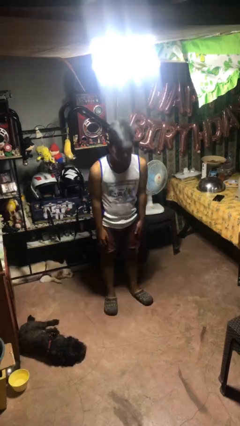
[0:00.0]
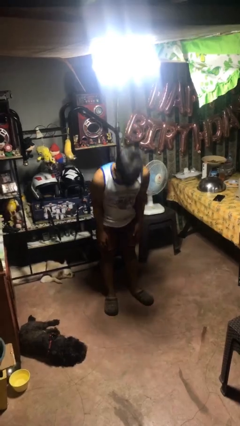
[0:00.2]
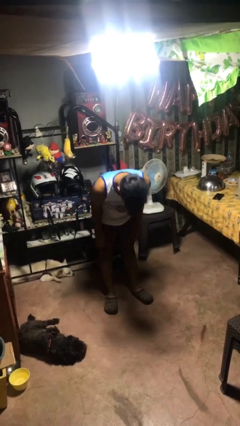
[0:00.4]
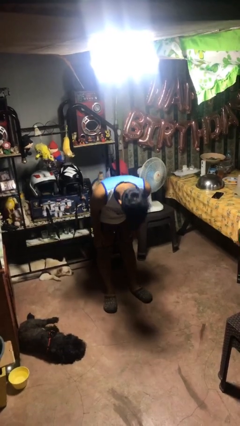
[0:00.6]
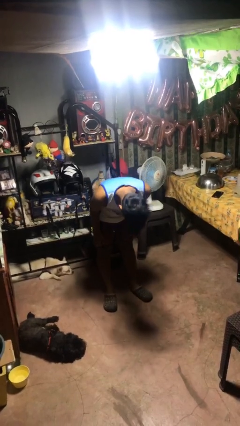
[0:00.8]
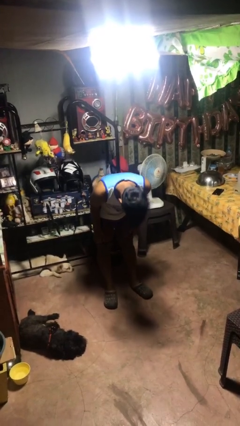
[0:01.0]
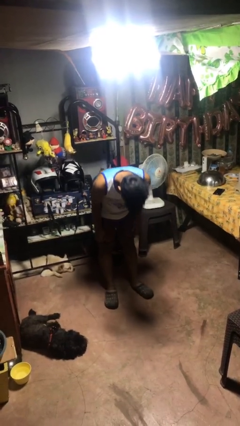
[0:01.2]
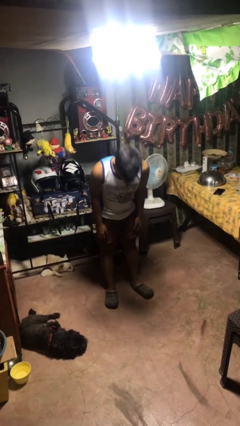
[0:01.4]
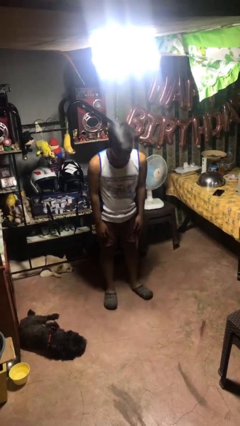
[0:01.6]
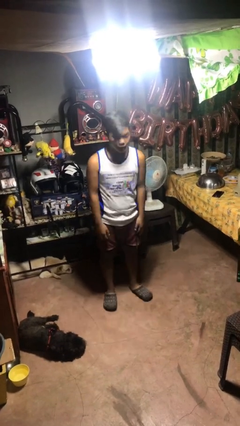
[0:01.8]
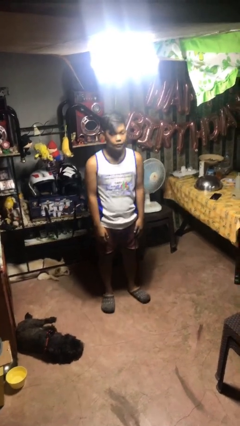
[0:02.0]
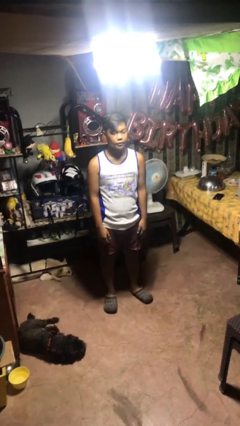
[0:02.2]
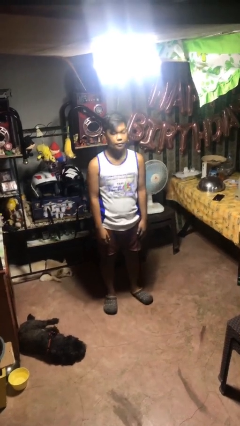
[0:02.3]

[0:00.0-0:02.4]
person bows

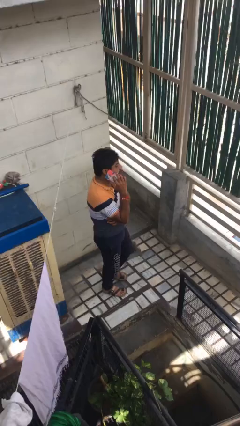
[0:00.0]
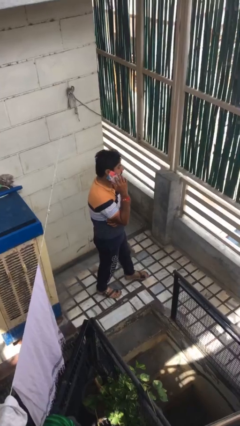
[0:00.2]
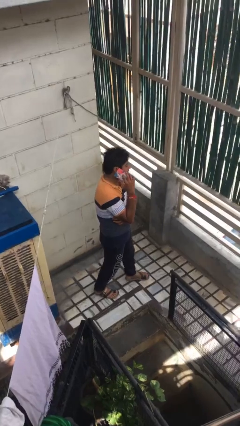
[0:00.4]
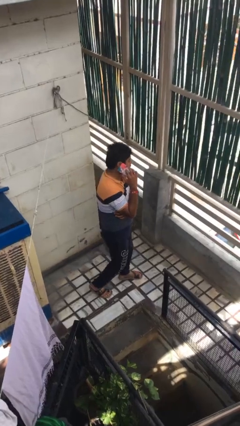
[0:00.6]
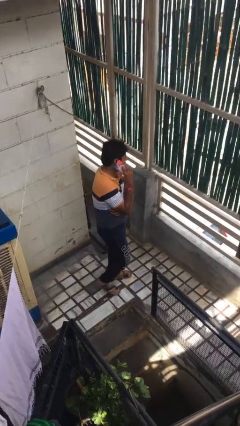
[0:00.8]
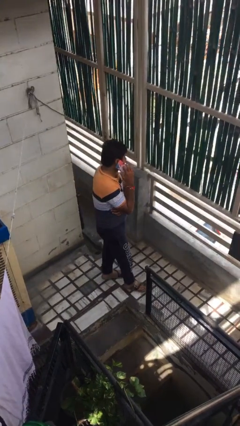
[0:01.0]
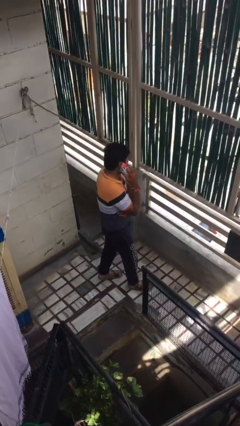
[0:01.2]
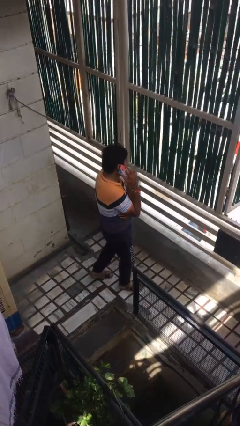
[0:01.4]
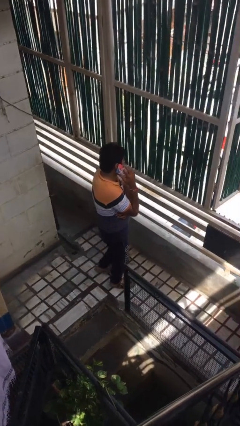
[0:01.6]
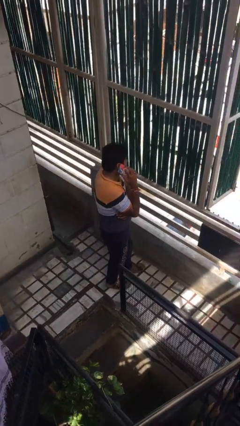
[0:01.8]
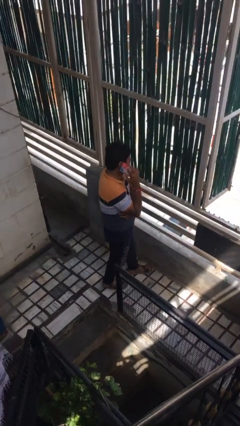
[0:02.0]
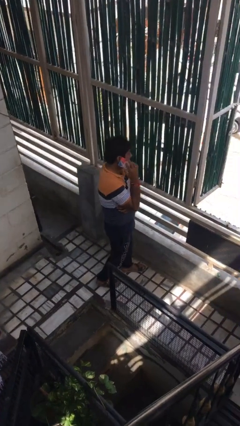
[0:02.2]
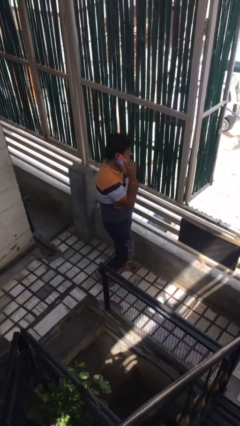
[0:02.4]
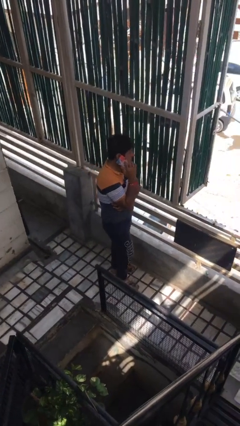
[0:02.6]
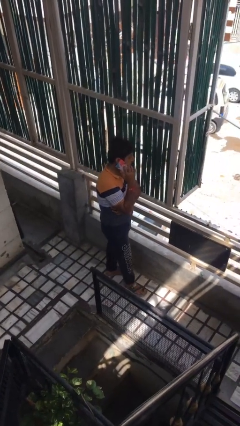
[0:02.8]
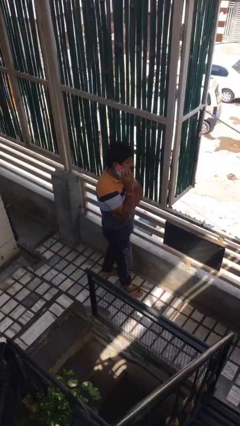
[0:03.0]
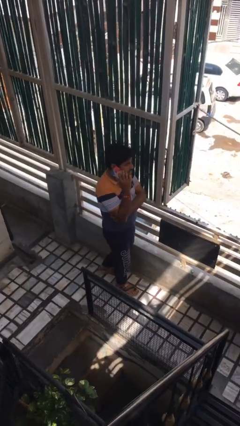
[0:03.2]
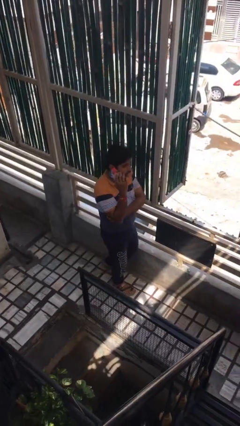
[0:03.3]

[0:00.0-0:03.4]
person talks on phone

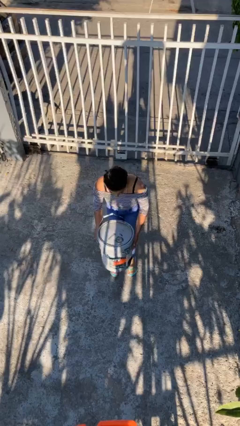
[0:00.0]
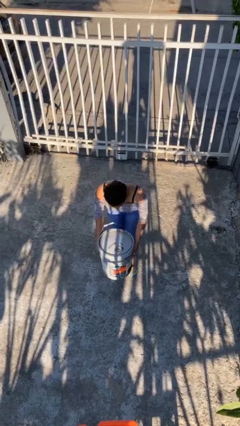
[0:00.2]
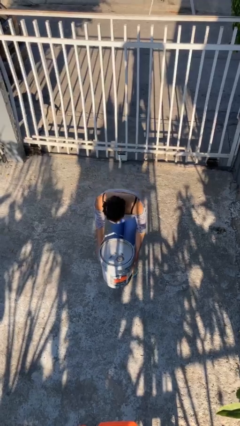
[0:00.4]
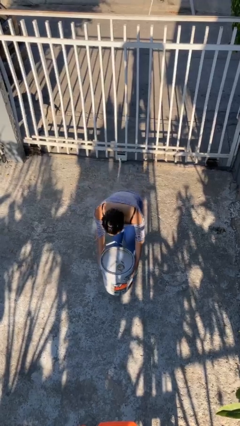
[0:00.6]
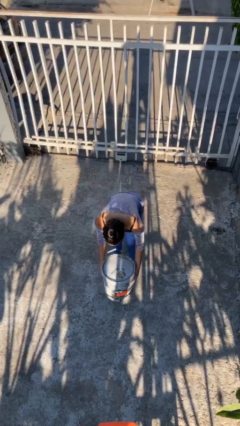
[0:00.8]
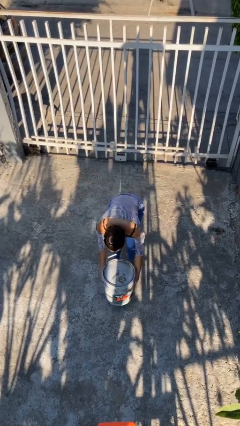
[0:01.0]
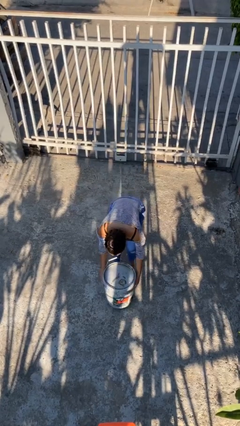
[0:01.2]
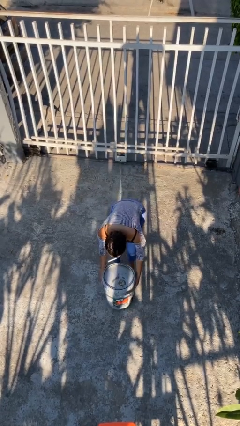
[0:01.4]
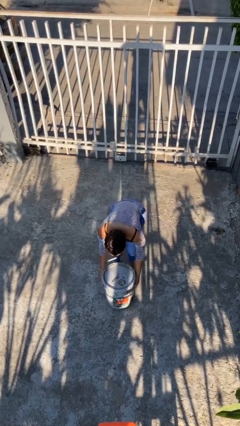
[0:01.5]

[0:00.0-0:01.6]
person puts down object on floor

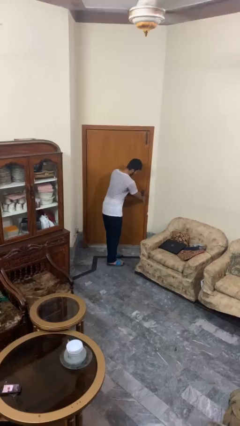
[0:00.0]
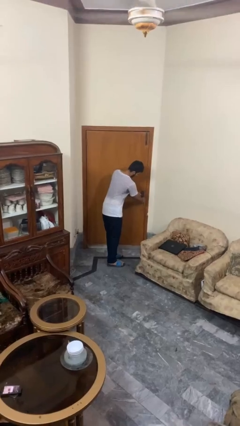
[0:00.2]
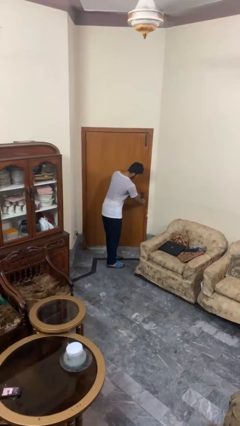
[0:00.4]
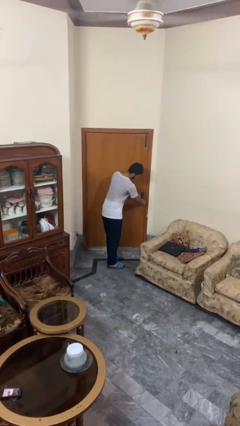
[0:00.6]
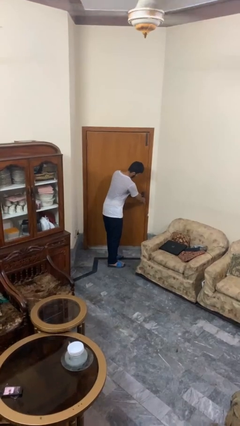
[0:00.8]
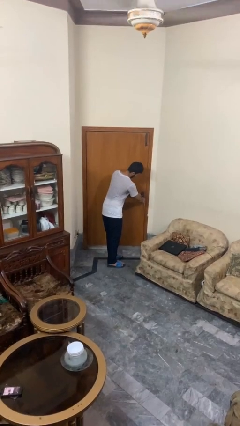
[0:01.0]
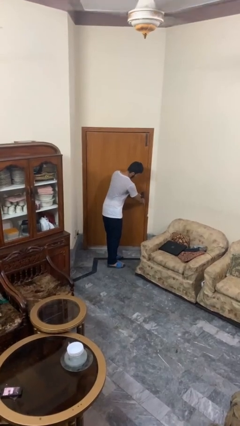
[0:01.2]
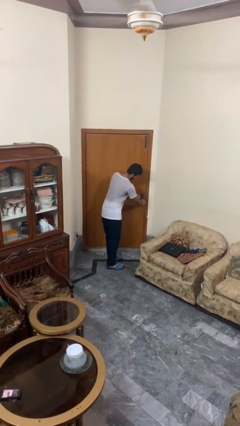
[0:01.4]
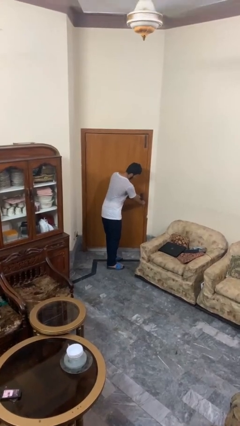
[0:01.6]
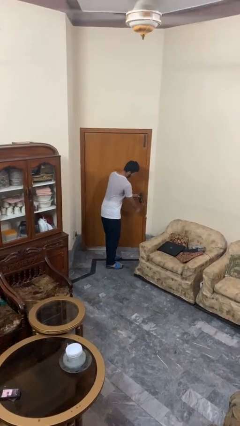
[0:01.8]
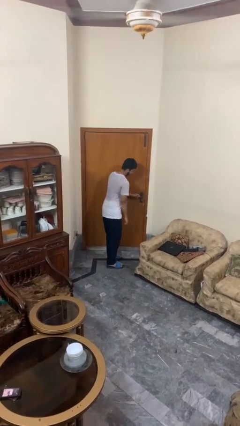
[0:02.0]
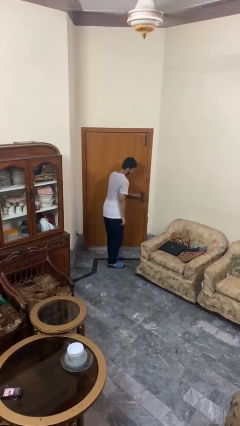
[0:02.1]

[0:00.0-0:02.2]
person locks door with keys

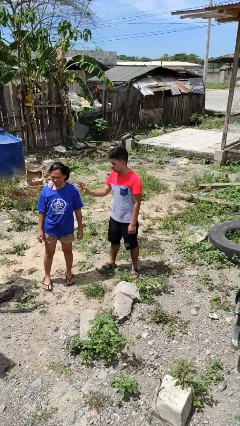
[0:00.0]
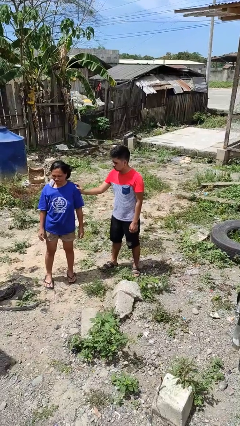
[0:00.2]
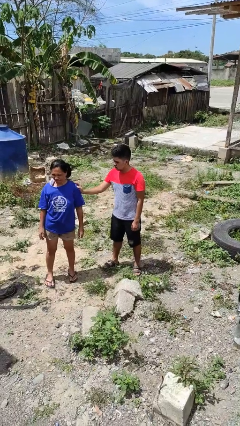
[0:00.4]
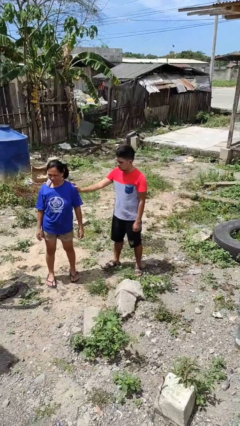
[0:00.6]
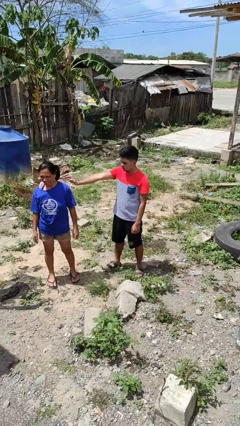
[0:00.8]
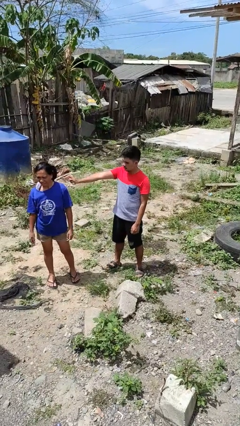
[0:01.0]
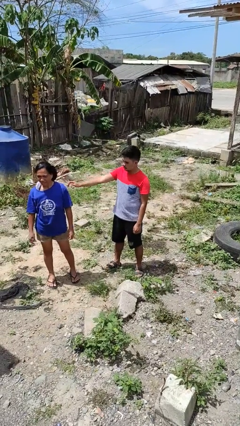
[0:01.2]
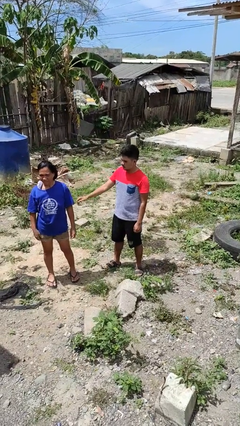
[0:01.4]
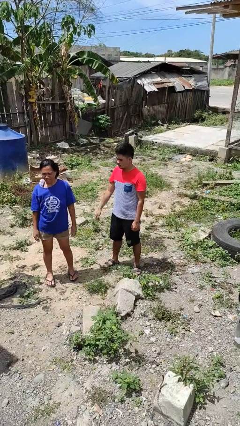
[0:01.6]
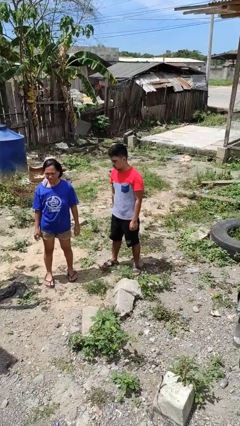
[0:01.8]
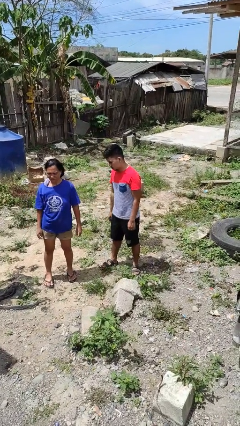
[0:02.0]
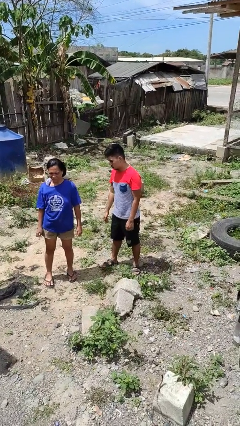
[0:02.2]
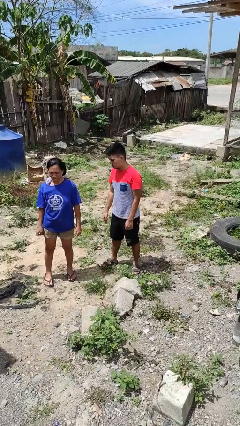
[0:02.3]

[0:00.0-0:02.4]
person shoves person

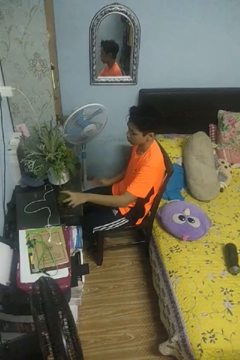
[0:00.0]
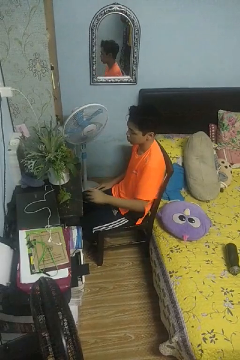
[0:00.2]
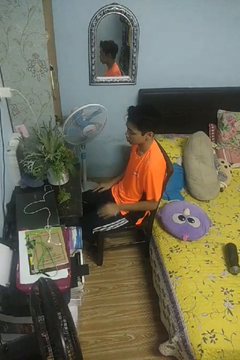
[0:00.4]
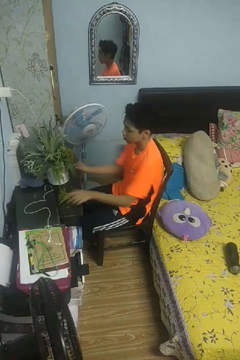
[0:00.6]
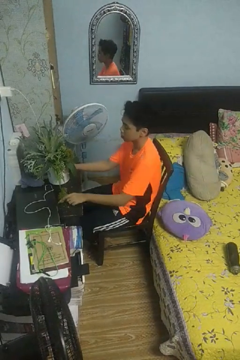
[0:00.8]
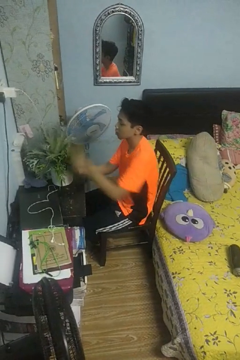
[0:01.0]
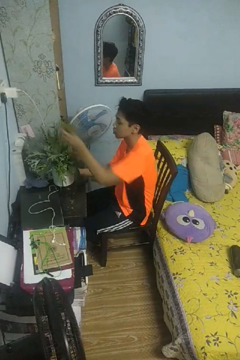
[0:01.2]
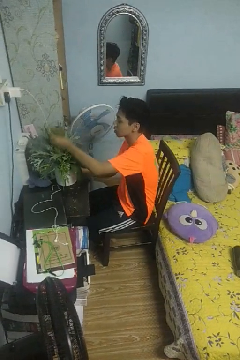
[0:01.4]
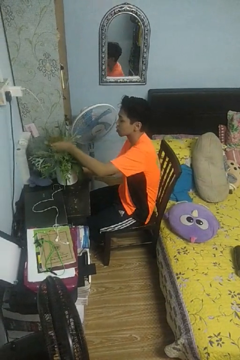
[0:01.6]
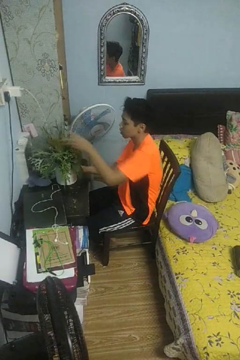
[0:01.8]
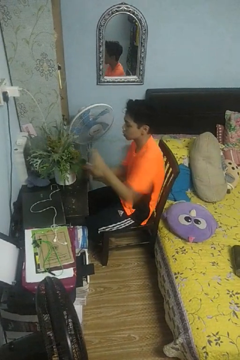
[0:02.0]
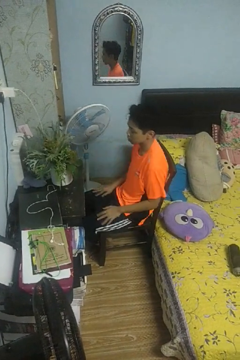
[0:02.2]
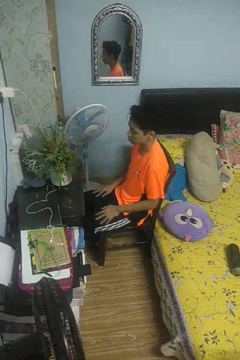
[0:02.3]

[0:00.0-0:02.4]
person arranges flowers in vase

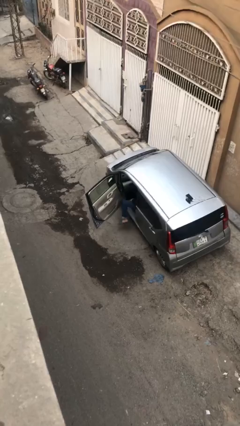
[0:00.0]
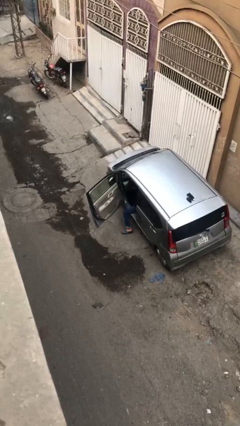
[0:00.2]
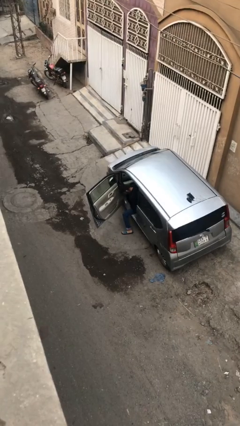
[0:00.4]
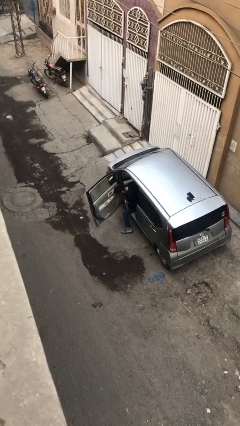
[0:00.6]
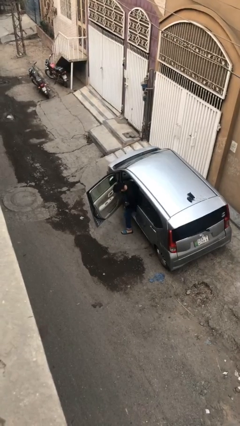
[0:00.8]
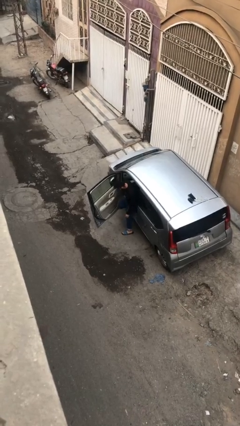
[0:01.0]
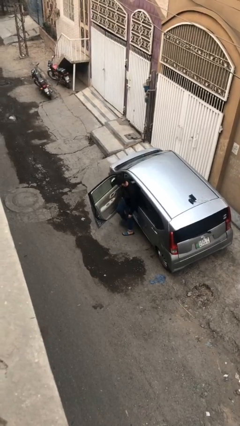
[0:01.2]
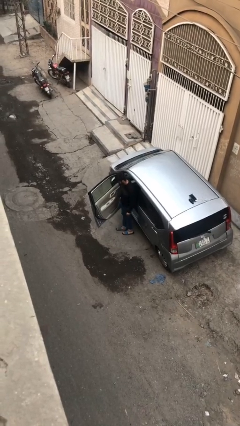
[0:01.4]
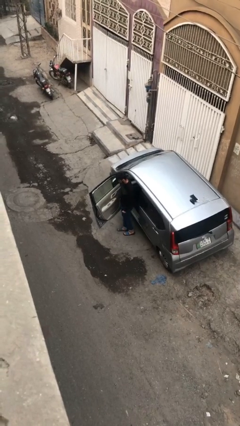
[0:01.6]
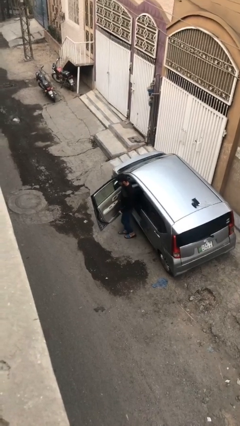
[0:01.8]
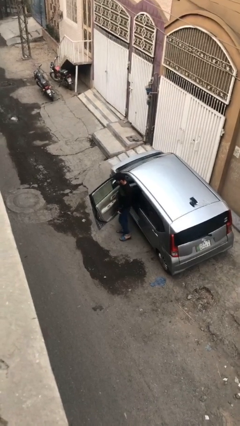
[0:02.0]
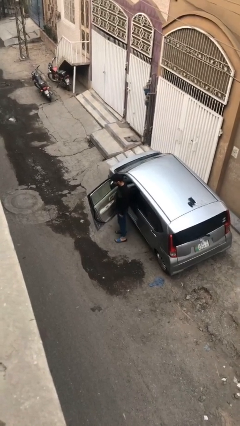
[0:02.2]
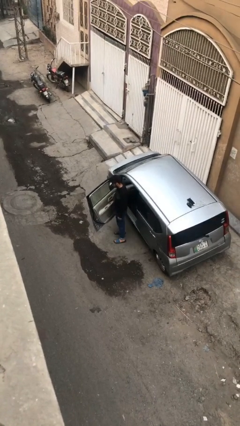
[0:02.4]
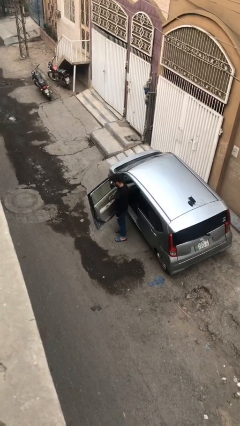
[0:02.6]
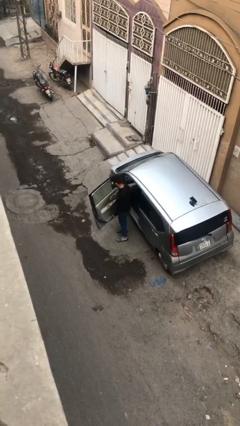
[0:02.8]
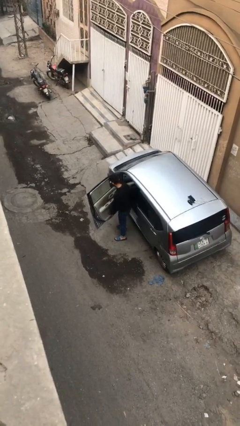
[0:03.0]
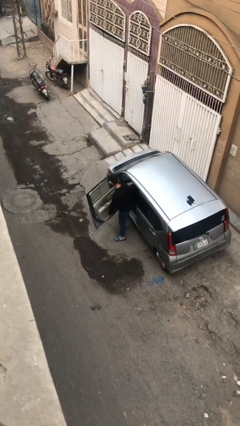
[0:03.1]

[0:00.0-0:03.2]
person exits car

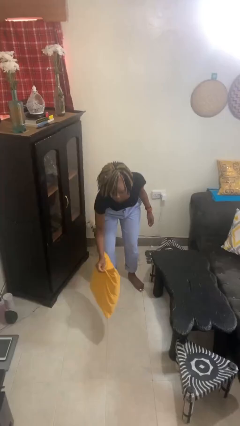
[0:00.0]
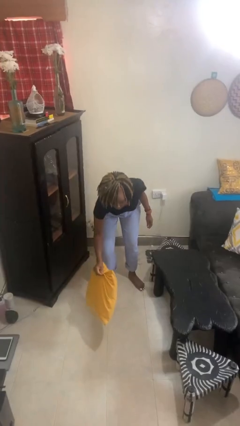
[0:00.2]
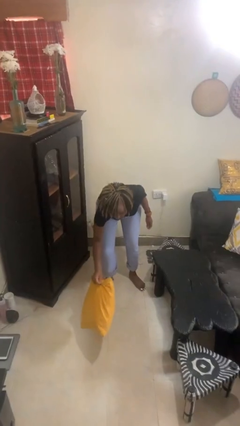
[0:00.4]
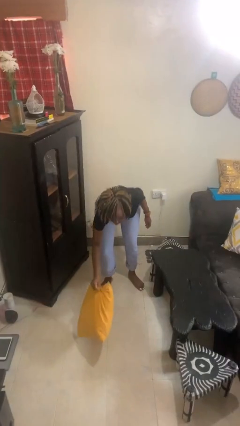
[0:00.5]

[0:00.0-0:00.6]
person catches dropped object
